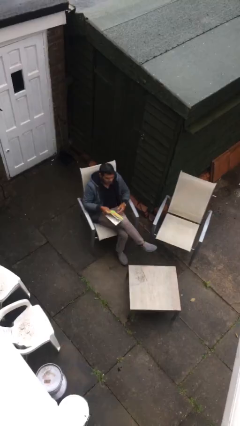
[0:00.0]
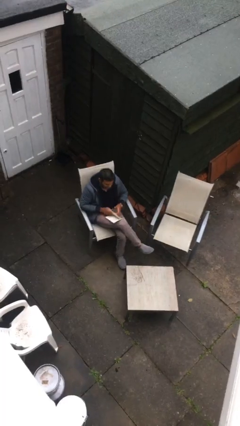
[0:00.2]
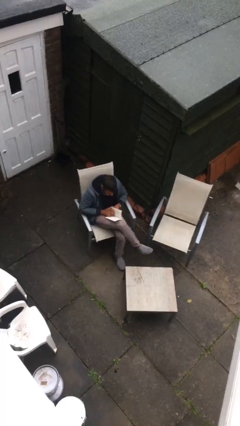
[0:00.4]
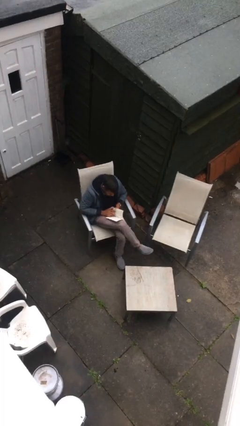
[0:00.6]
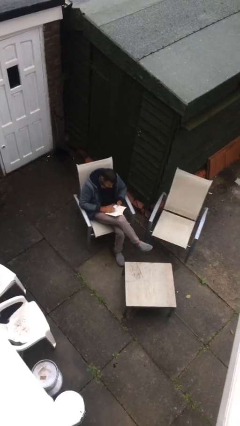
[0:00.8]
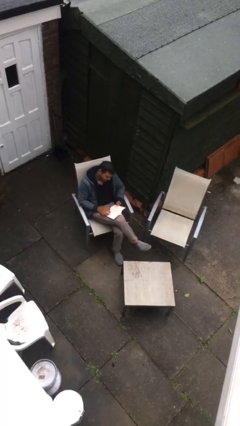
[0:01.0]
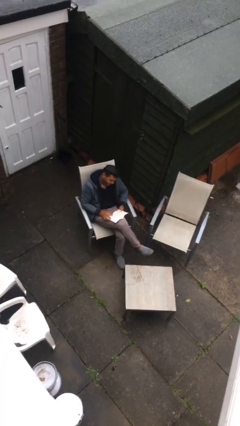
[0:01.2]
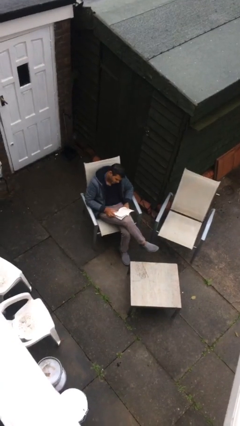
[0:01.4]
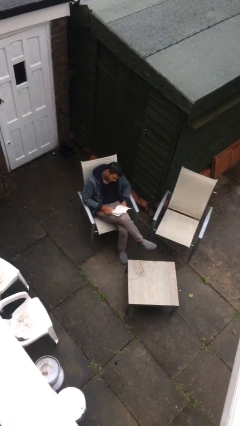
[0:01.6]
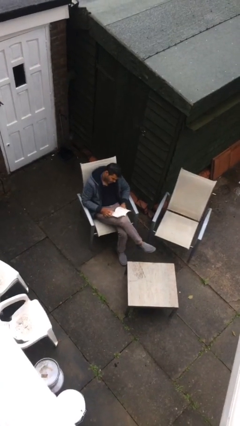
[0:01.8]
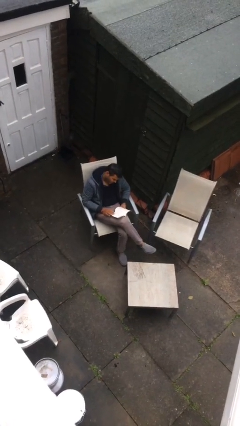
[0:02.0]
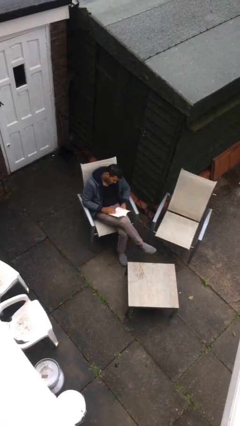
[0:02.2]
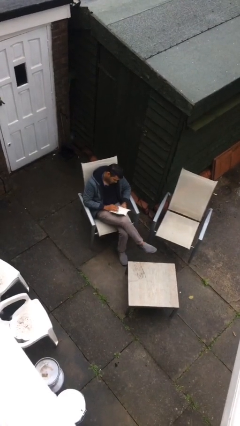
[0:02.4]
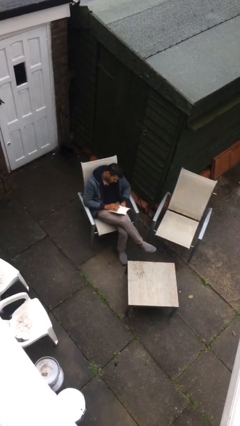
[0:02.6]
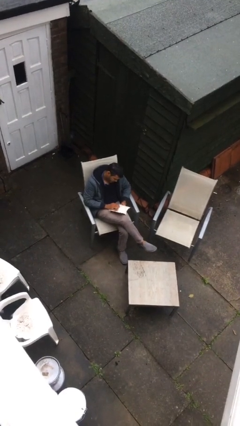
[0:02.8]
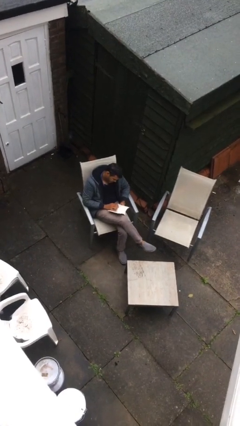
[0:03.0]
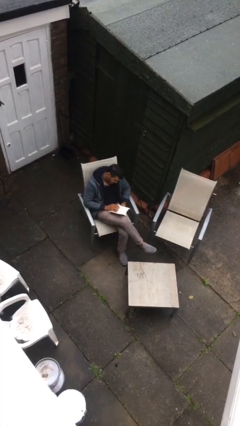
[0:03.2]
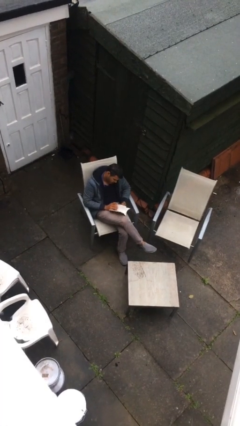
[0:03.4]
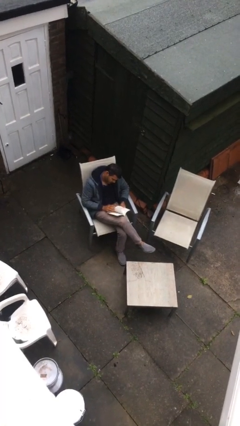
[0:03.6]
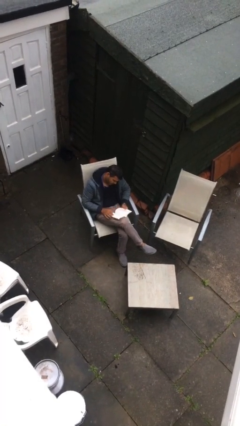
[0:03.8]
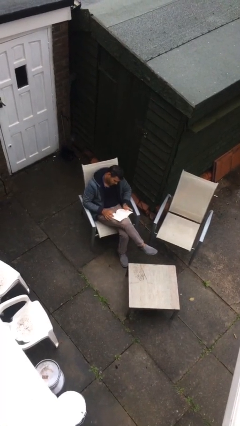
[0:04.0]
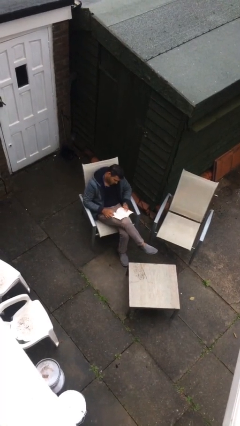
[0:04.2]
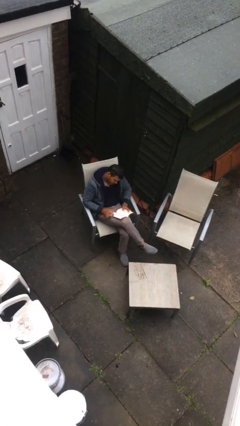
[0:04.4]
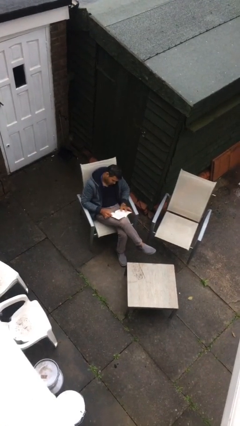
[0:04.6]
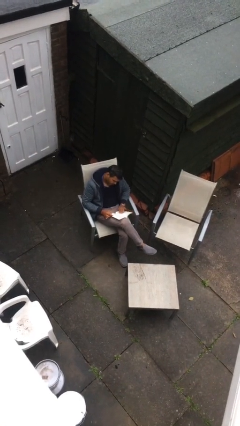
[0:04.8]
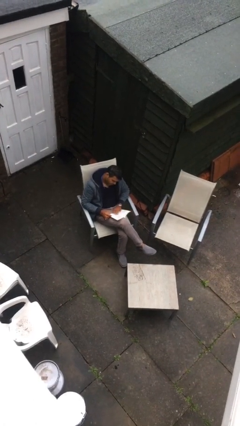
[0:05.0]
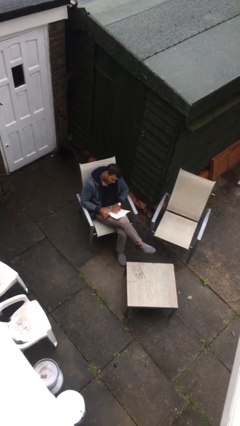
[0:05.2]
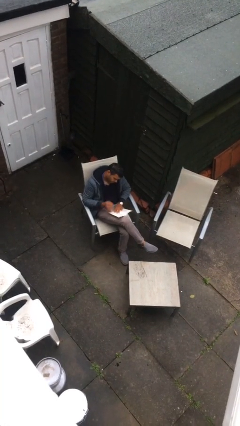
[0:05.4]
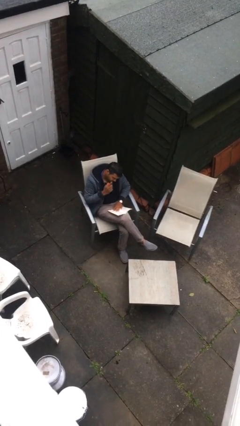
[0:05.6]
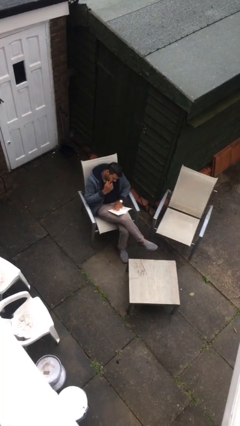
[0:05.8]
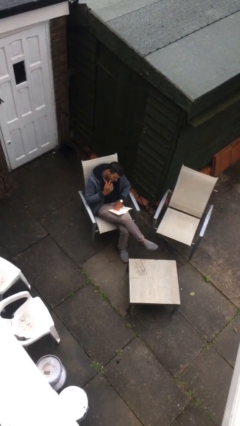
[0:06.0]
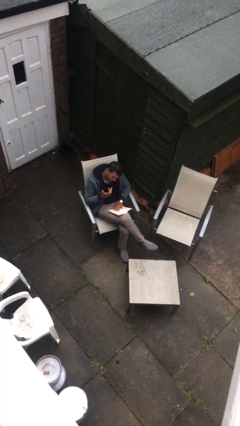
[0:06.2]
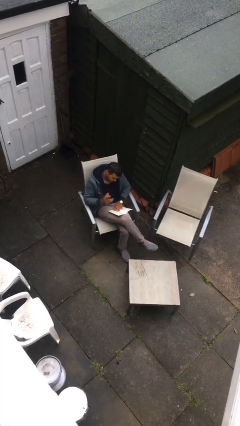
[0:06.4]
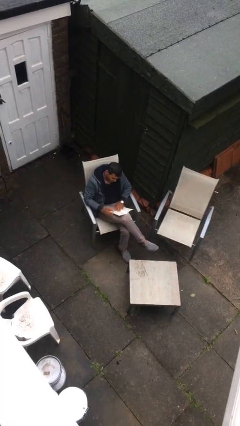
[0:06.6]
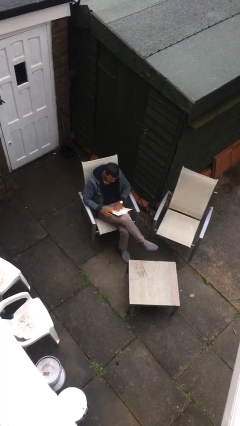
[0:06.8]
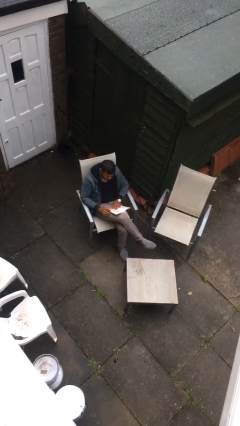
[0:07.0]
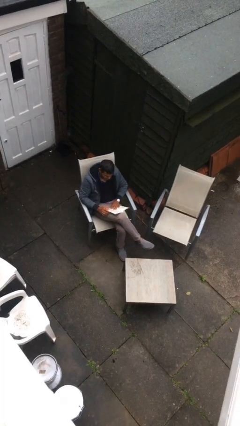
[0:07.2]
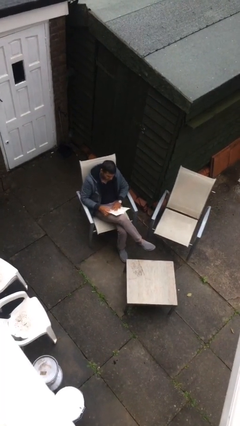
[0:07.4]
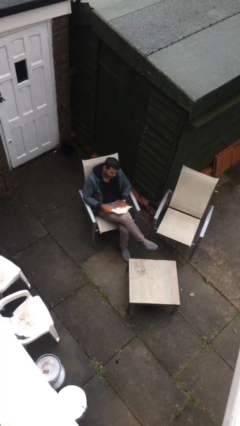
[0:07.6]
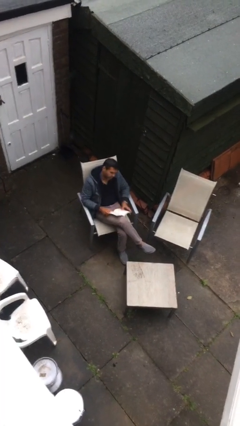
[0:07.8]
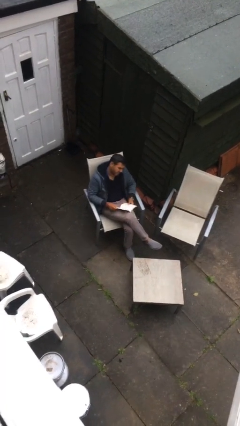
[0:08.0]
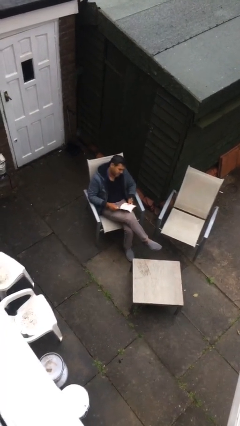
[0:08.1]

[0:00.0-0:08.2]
person reads document

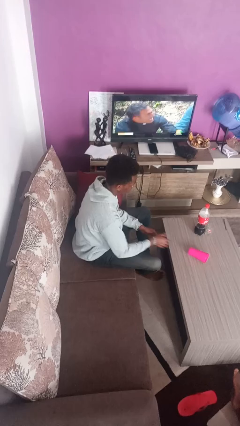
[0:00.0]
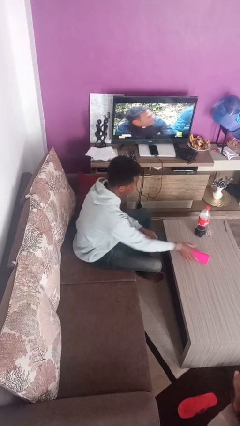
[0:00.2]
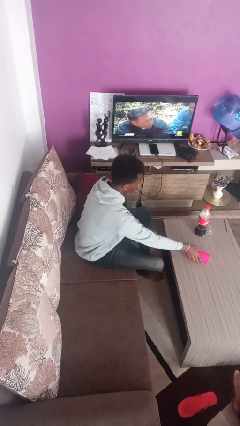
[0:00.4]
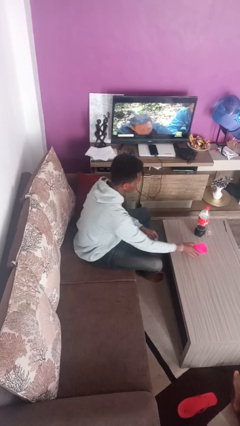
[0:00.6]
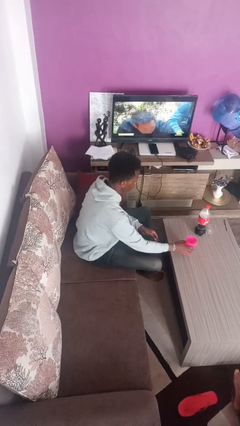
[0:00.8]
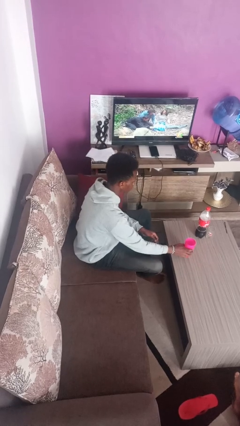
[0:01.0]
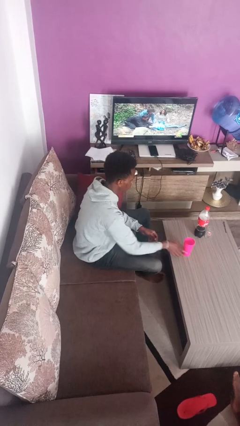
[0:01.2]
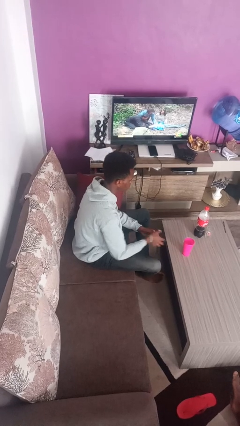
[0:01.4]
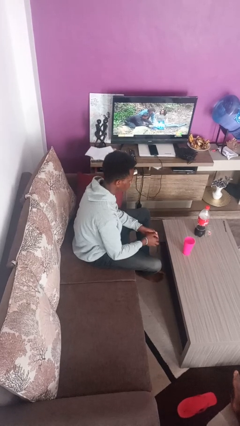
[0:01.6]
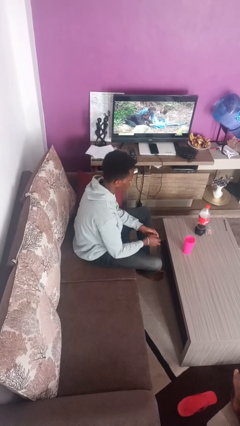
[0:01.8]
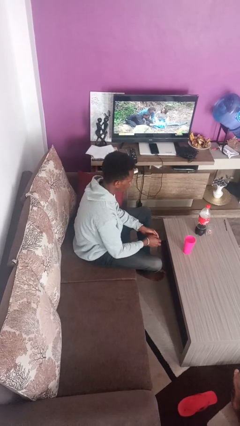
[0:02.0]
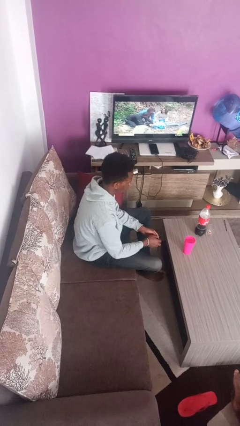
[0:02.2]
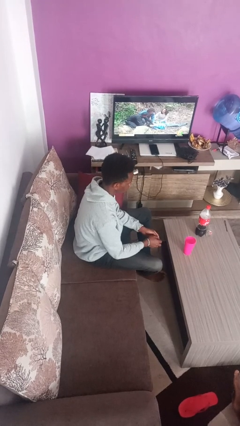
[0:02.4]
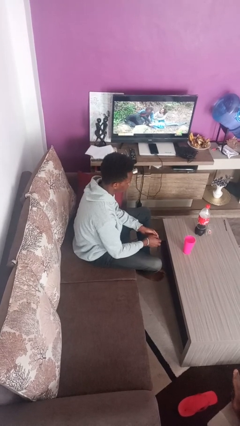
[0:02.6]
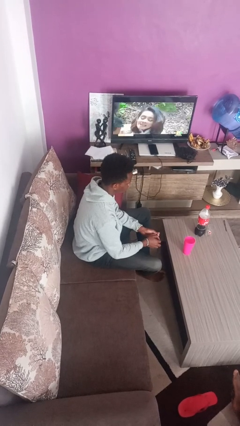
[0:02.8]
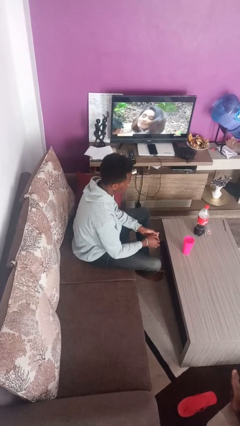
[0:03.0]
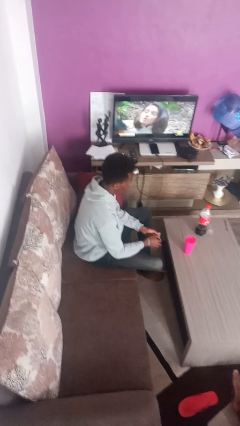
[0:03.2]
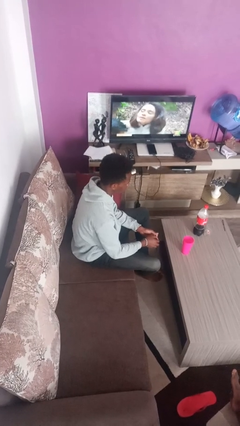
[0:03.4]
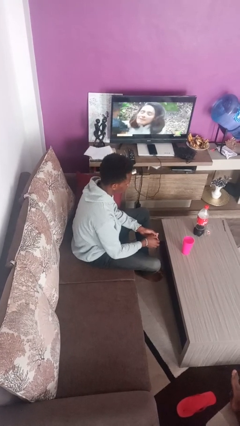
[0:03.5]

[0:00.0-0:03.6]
person sets upright glass

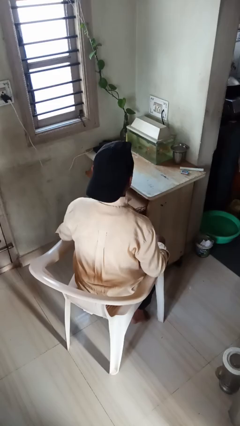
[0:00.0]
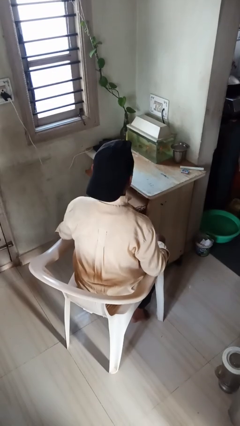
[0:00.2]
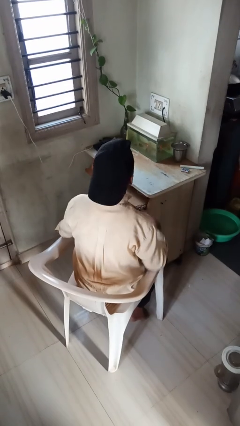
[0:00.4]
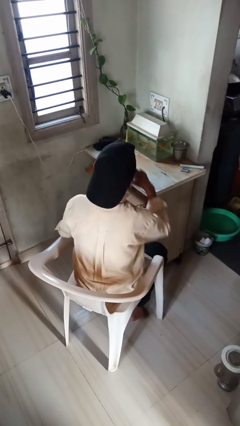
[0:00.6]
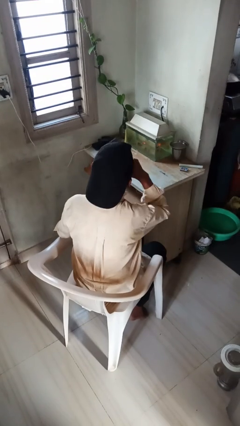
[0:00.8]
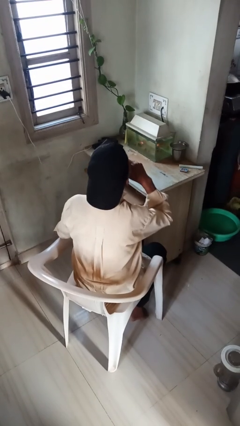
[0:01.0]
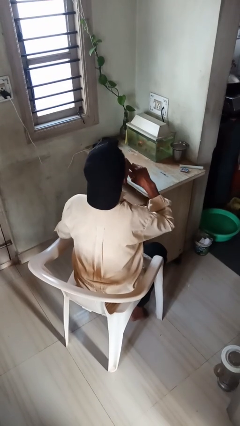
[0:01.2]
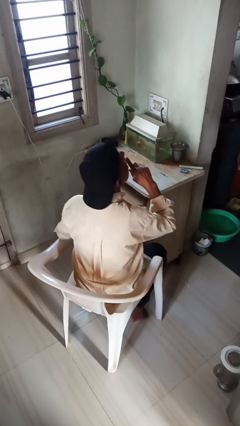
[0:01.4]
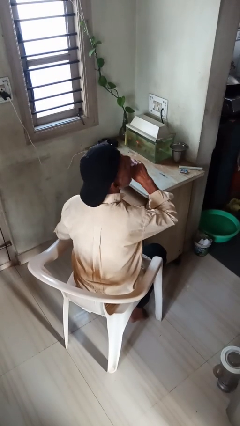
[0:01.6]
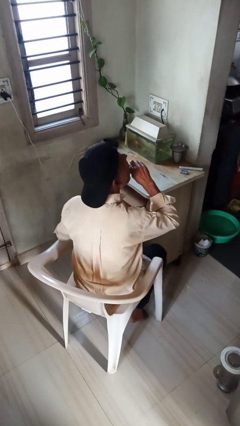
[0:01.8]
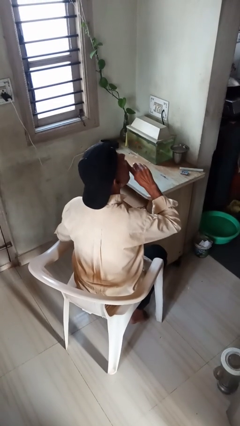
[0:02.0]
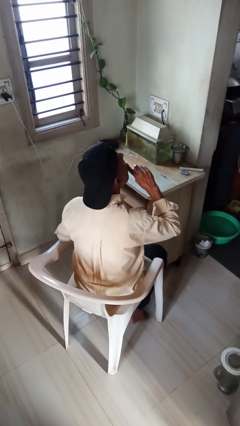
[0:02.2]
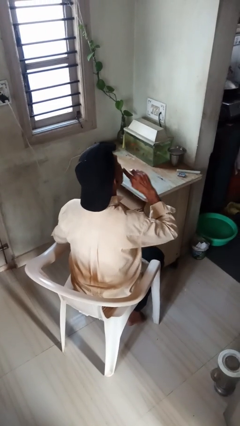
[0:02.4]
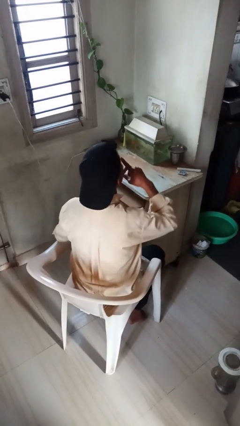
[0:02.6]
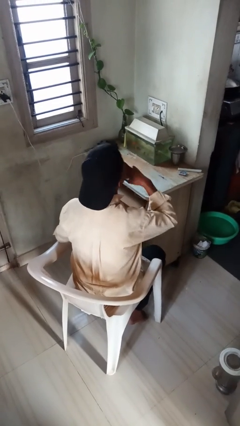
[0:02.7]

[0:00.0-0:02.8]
person licks fingers

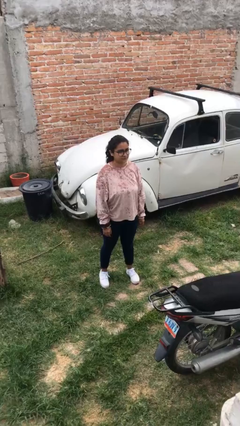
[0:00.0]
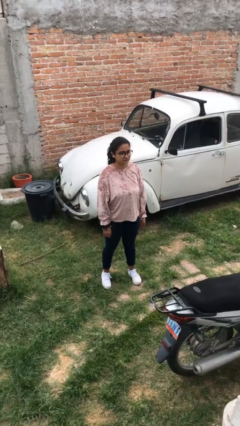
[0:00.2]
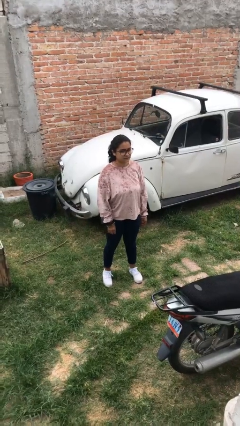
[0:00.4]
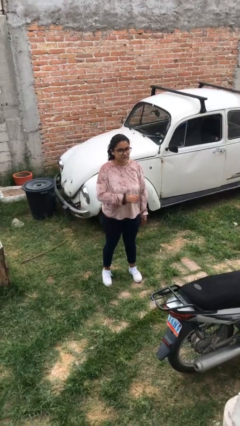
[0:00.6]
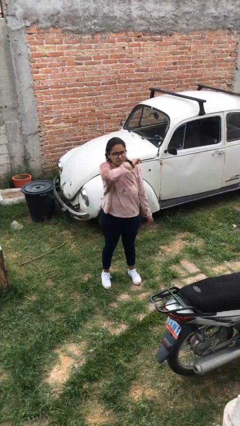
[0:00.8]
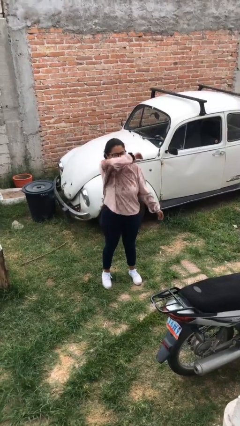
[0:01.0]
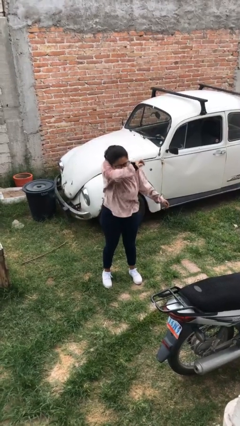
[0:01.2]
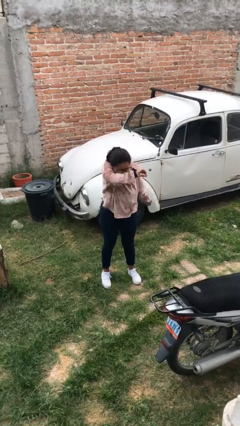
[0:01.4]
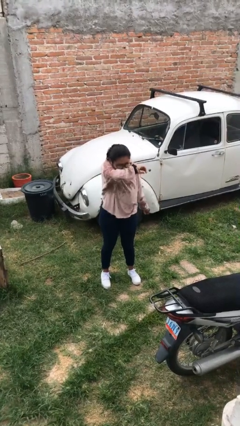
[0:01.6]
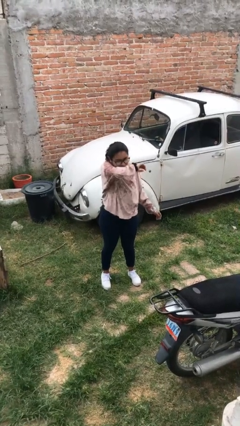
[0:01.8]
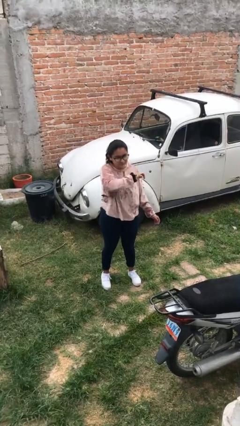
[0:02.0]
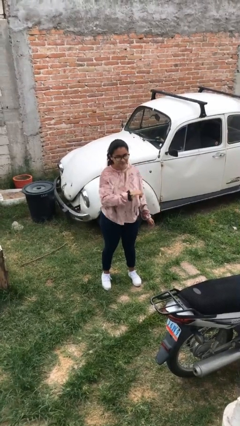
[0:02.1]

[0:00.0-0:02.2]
person sneezes into arm

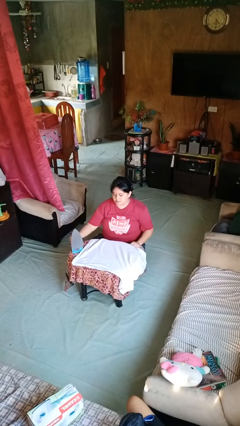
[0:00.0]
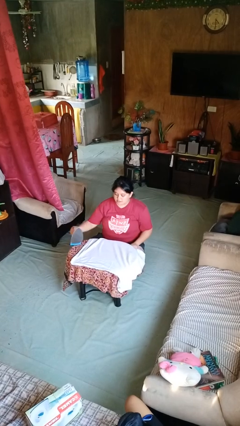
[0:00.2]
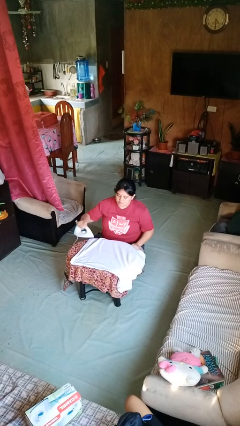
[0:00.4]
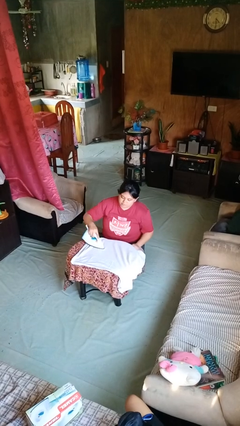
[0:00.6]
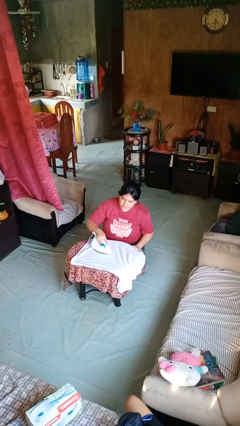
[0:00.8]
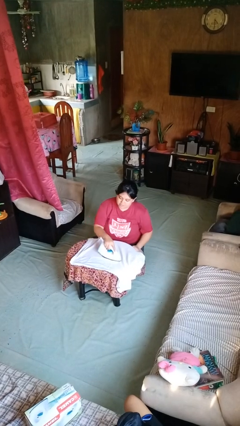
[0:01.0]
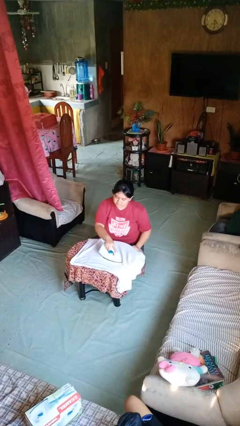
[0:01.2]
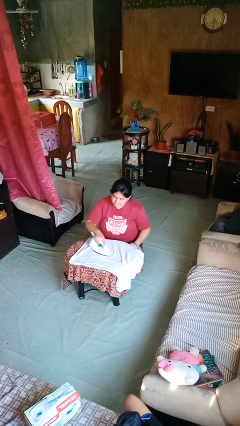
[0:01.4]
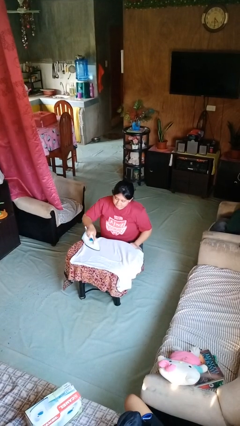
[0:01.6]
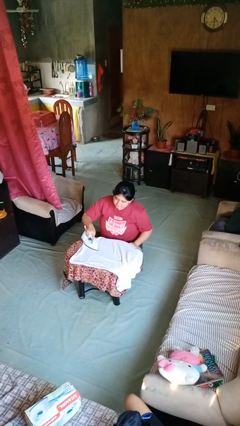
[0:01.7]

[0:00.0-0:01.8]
person irons clothes
